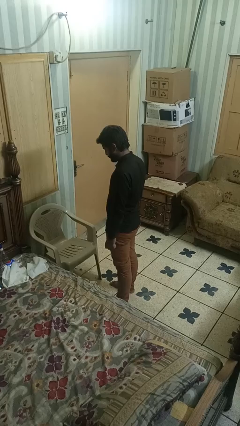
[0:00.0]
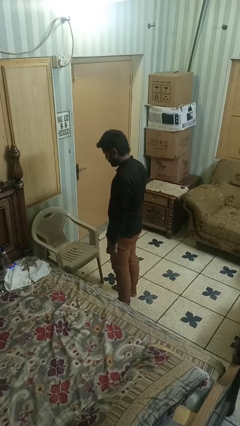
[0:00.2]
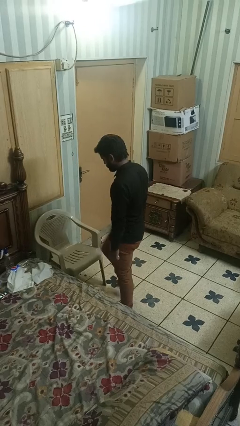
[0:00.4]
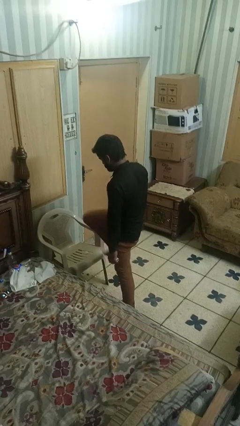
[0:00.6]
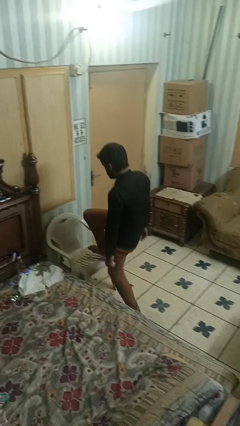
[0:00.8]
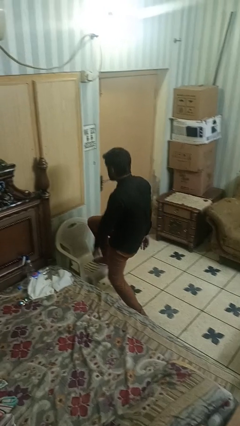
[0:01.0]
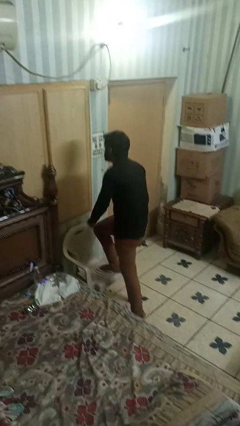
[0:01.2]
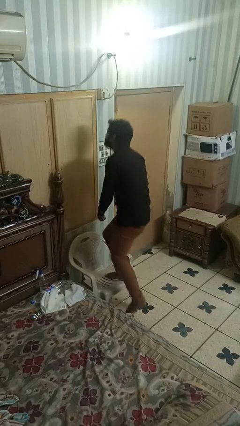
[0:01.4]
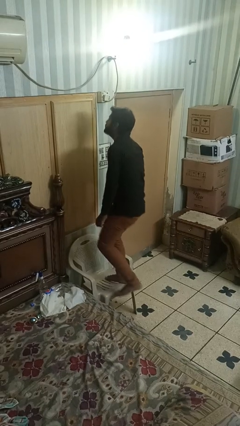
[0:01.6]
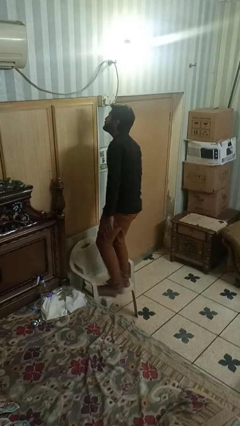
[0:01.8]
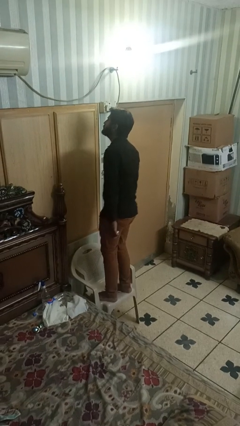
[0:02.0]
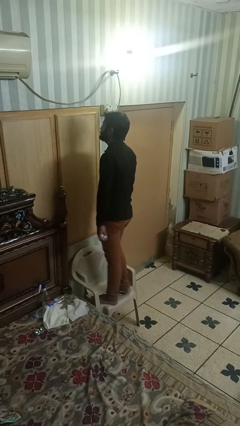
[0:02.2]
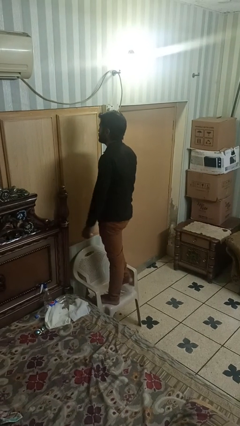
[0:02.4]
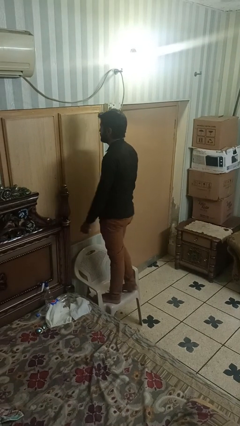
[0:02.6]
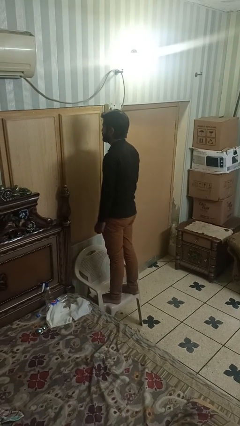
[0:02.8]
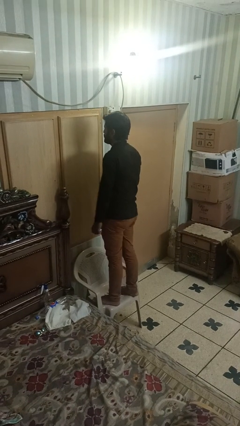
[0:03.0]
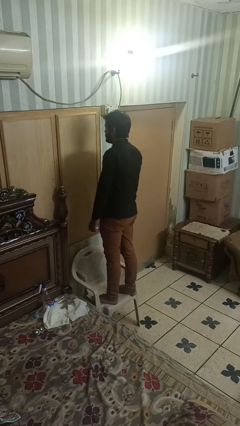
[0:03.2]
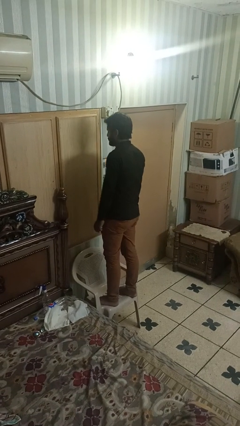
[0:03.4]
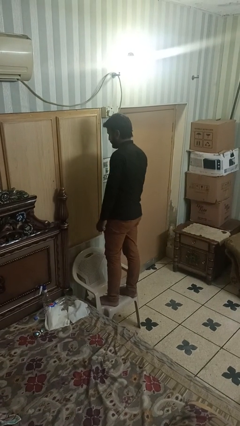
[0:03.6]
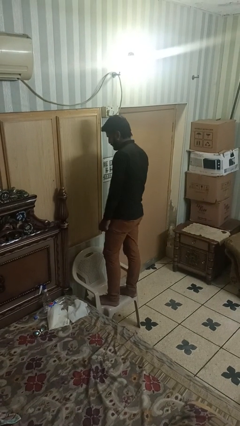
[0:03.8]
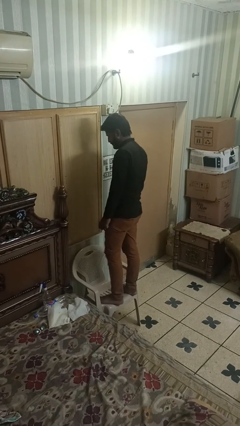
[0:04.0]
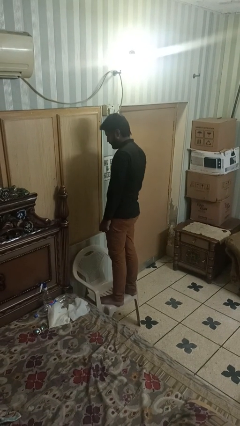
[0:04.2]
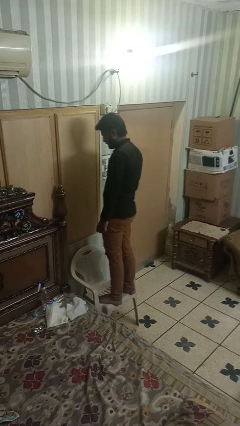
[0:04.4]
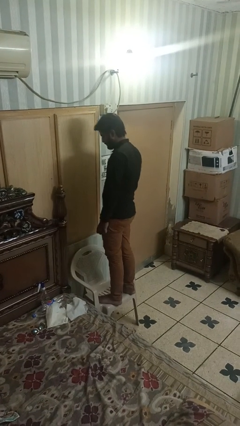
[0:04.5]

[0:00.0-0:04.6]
person climbs on chair

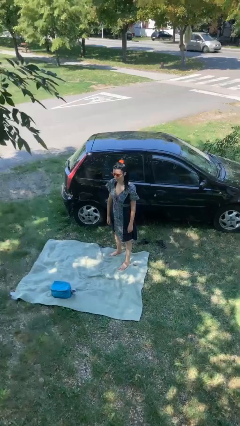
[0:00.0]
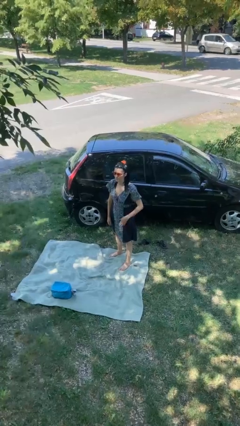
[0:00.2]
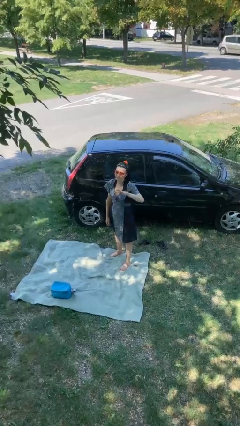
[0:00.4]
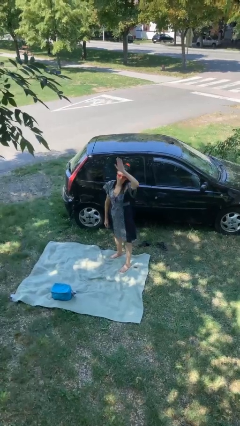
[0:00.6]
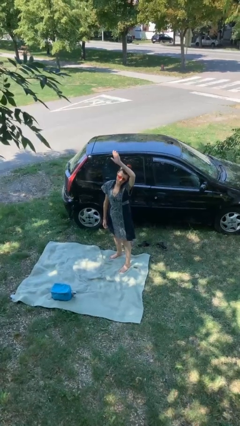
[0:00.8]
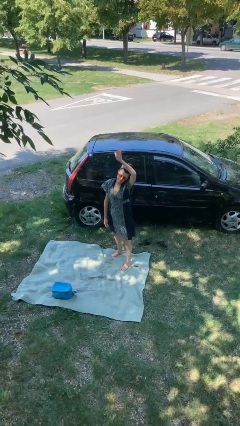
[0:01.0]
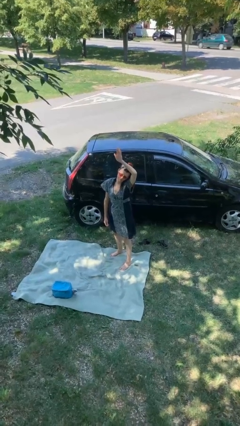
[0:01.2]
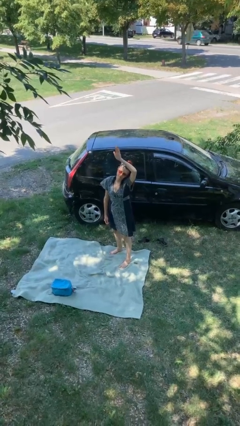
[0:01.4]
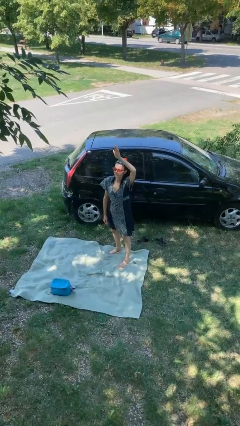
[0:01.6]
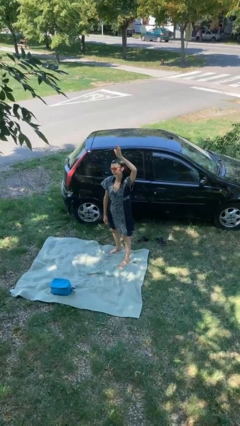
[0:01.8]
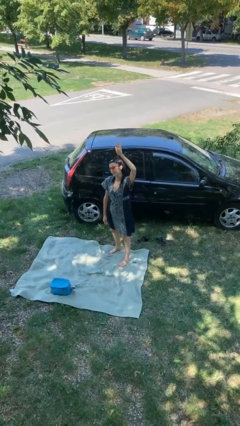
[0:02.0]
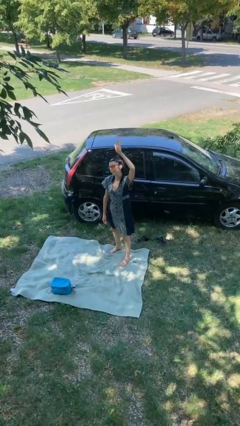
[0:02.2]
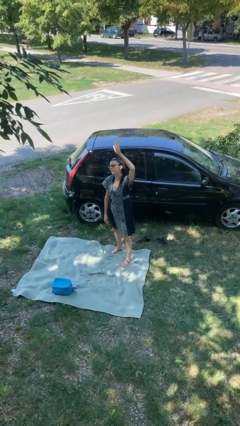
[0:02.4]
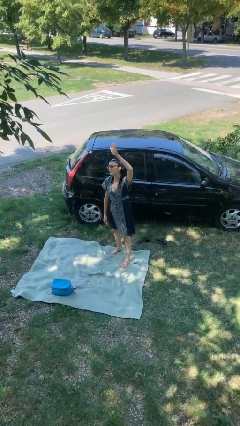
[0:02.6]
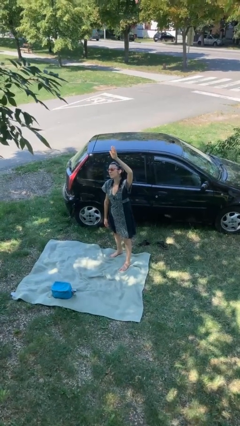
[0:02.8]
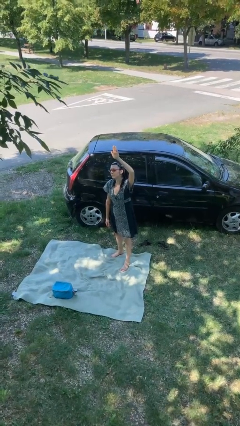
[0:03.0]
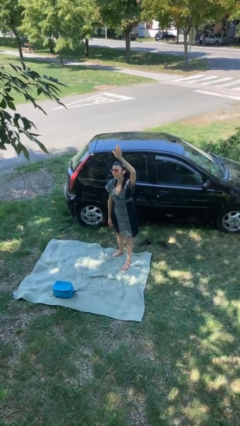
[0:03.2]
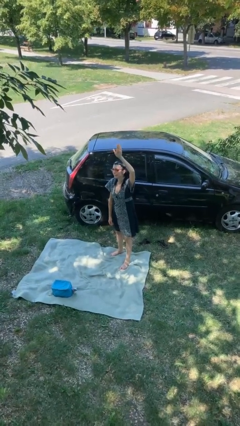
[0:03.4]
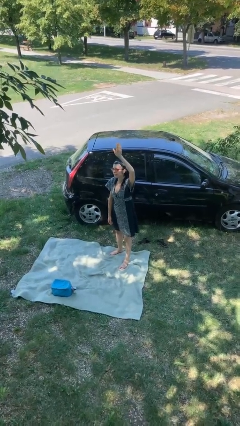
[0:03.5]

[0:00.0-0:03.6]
person gestures raise hand

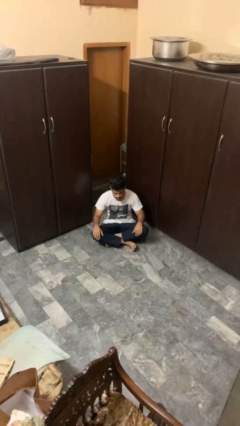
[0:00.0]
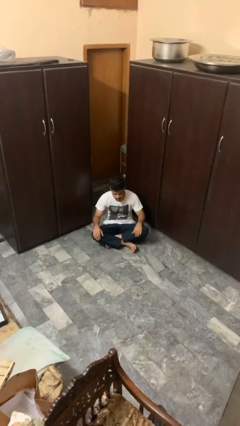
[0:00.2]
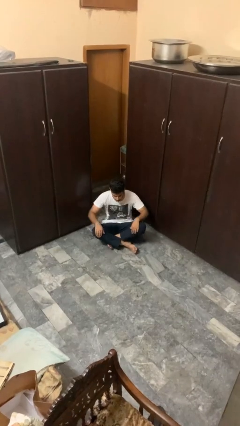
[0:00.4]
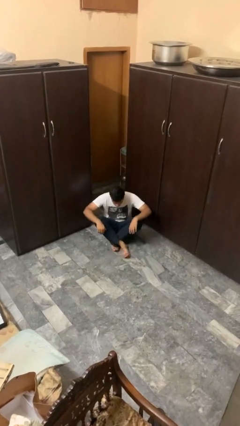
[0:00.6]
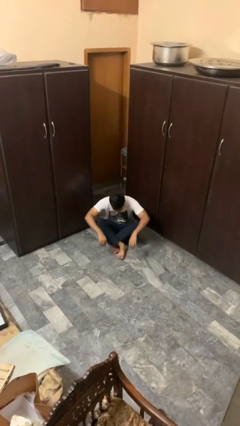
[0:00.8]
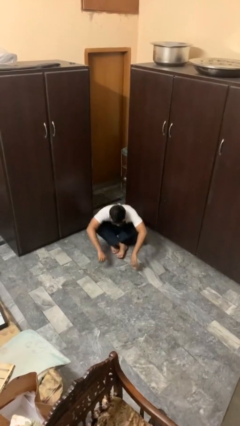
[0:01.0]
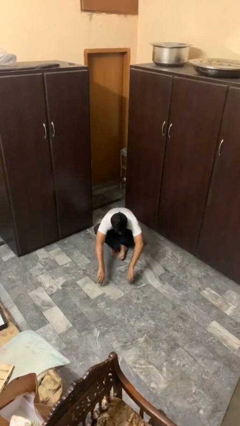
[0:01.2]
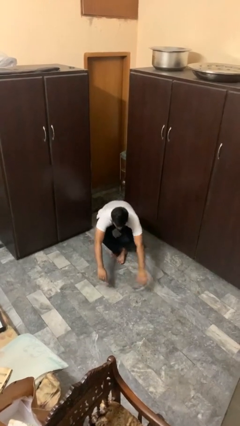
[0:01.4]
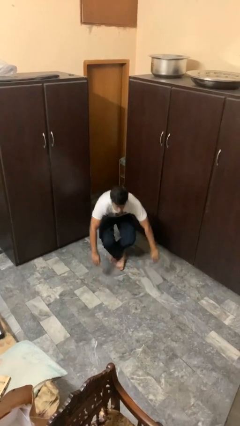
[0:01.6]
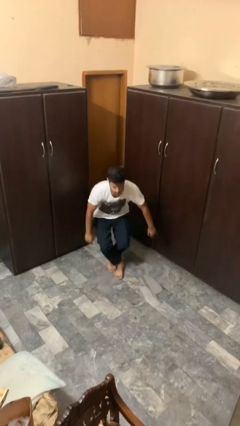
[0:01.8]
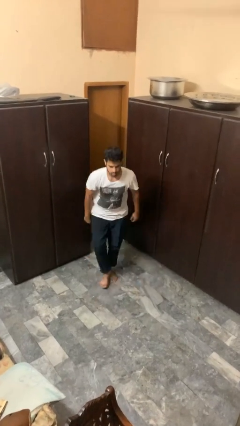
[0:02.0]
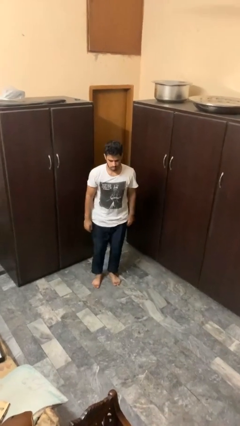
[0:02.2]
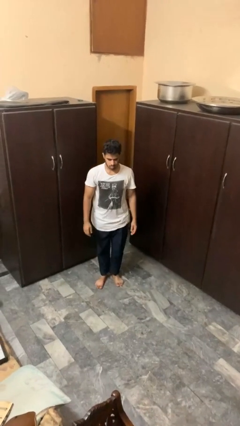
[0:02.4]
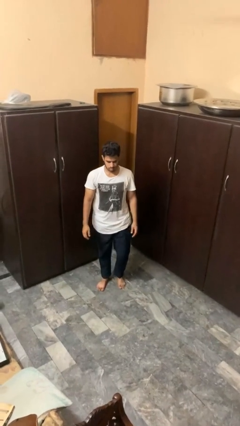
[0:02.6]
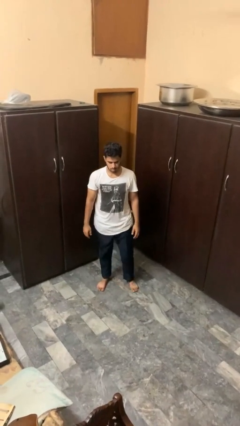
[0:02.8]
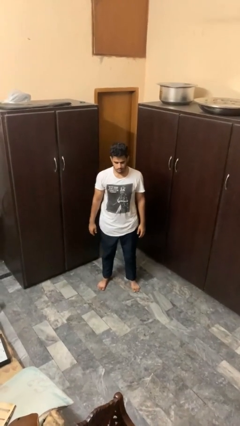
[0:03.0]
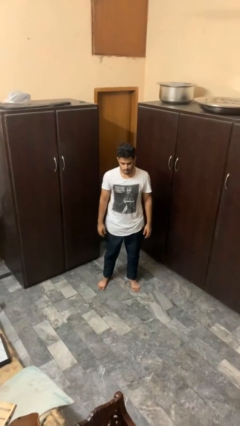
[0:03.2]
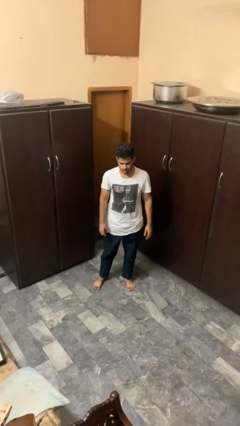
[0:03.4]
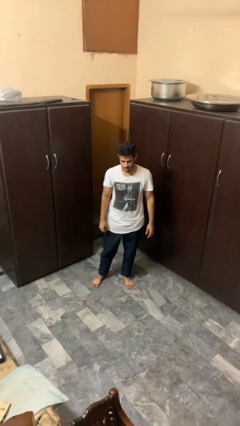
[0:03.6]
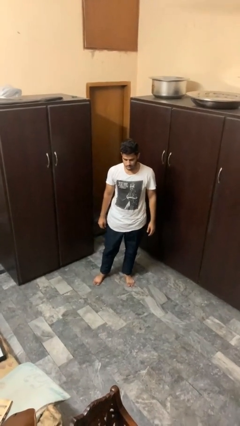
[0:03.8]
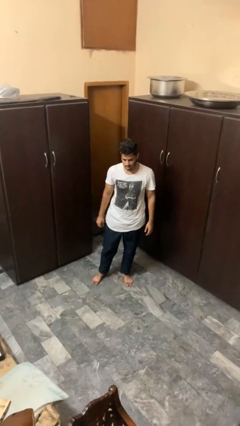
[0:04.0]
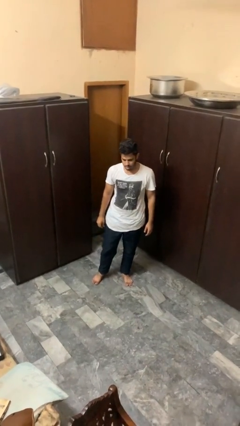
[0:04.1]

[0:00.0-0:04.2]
person stands up from floor

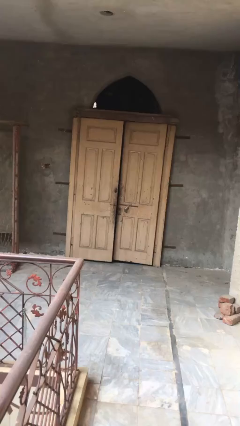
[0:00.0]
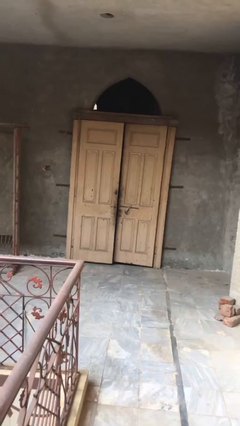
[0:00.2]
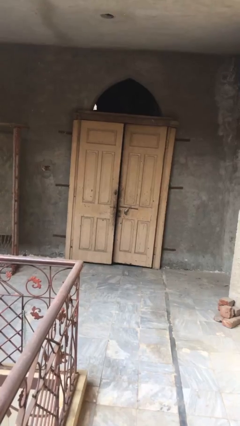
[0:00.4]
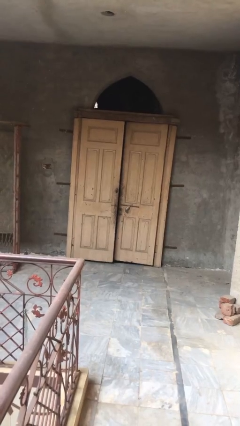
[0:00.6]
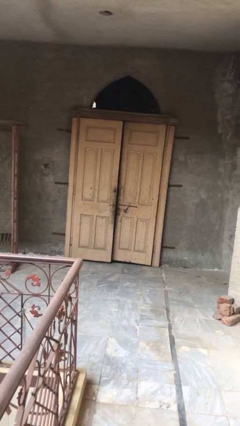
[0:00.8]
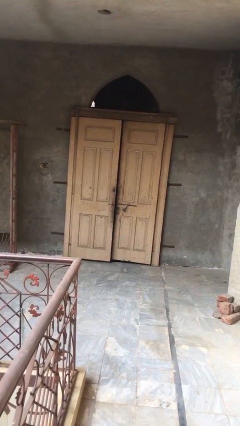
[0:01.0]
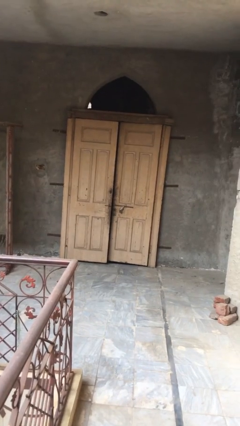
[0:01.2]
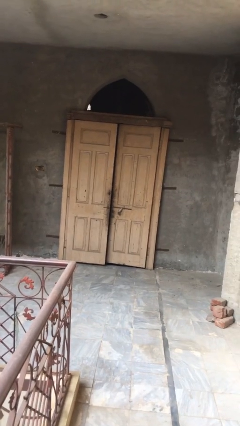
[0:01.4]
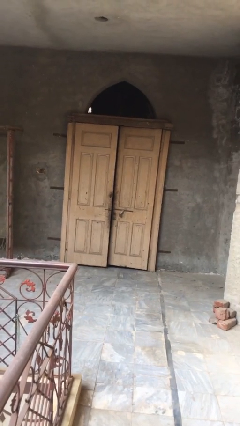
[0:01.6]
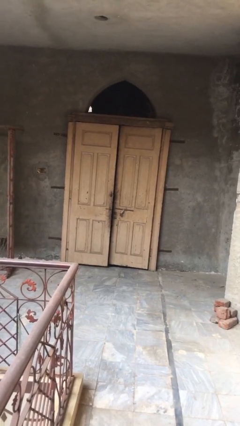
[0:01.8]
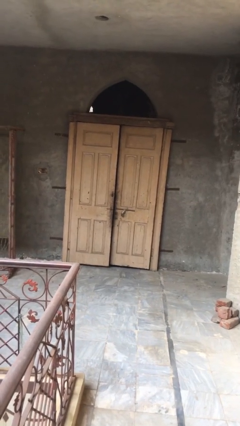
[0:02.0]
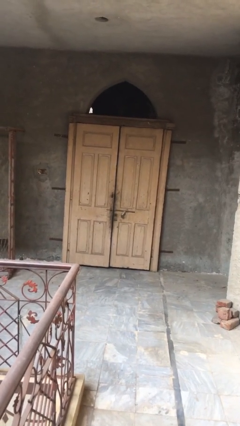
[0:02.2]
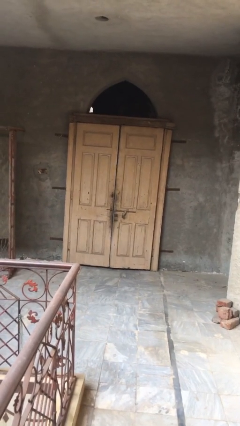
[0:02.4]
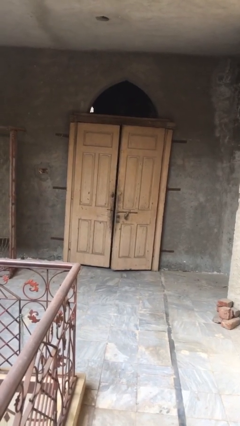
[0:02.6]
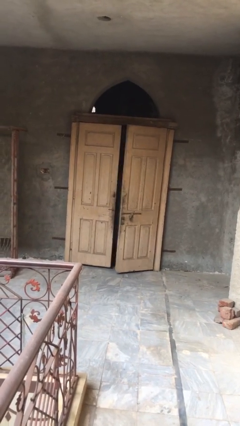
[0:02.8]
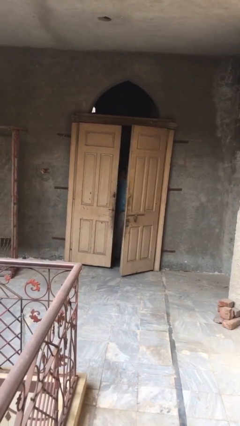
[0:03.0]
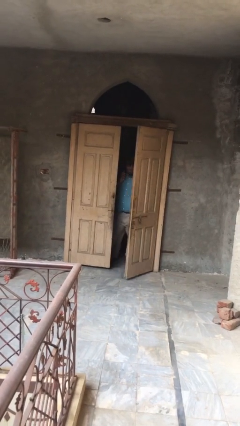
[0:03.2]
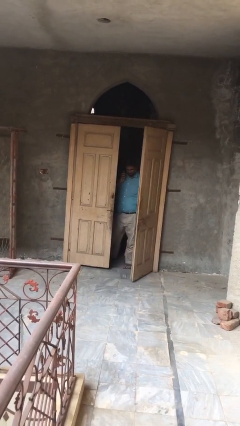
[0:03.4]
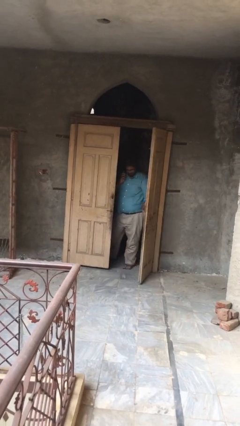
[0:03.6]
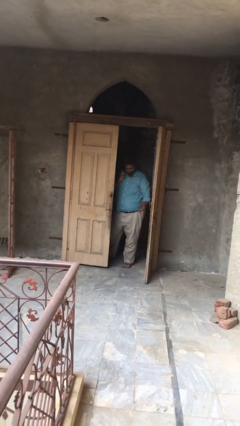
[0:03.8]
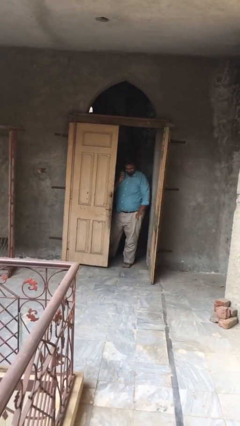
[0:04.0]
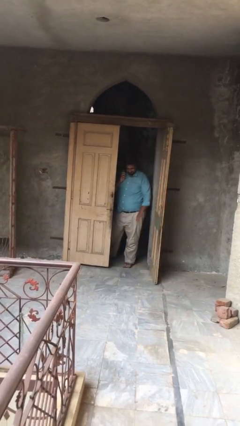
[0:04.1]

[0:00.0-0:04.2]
person opens facility door

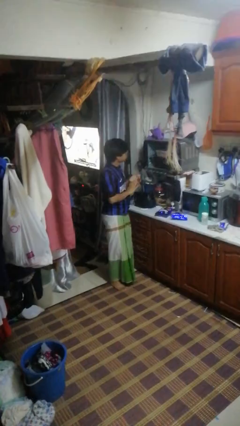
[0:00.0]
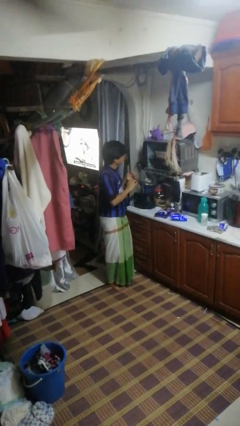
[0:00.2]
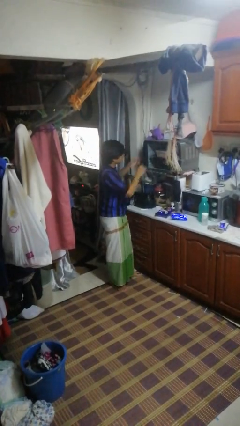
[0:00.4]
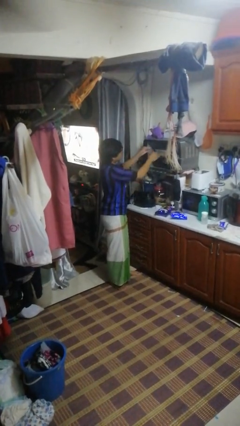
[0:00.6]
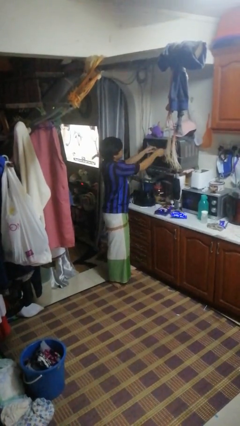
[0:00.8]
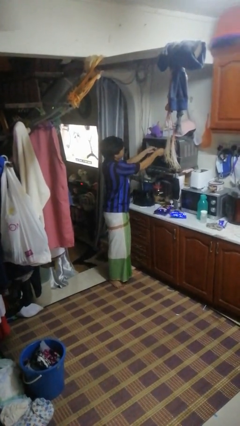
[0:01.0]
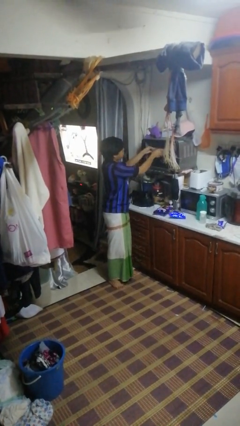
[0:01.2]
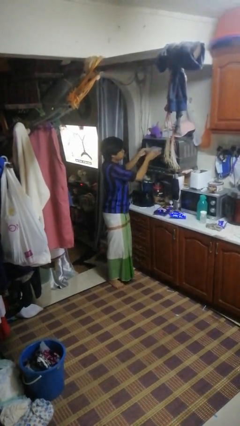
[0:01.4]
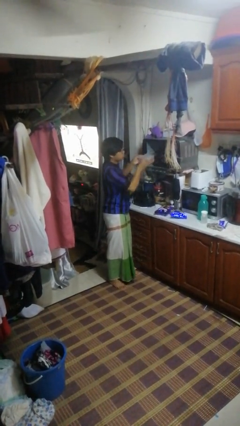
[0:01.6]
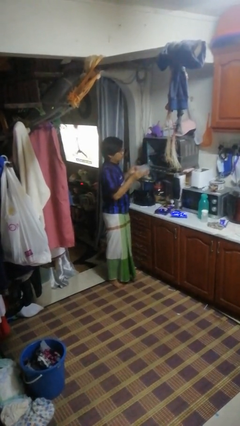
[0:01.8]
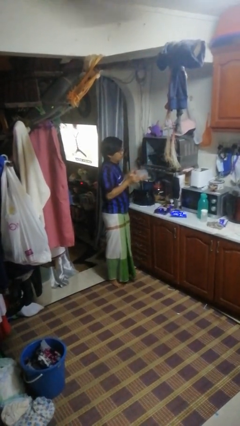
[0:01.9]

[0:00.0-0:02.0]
person takes object from oven
